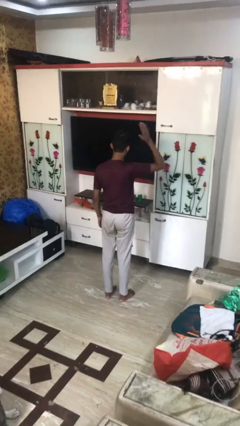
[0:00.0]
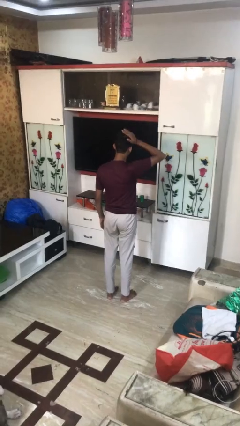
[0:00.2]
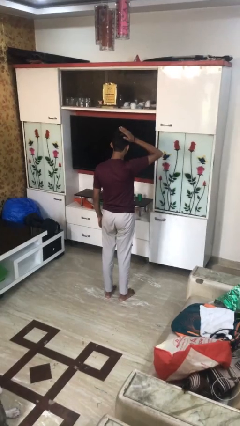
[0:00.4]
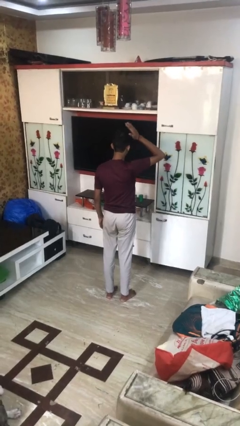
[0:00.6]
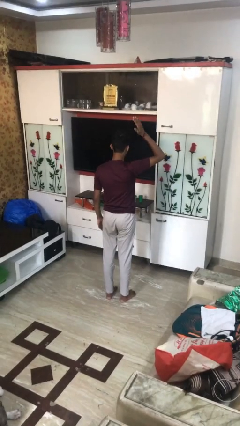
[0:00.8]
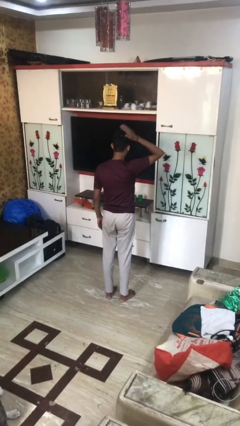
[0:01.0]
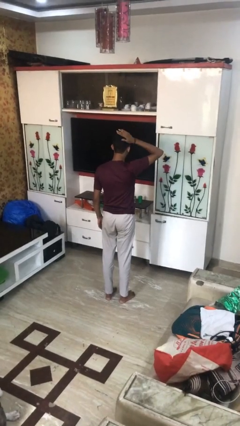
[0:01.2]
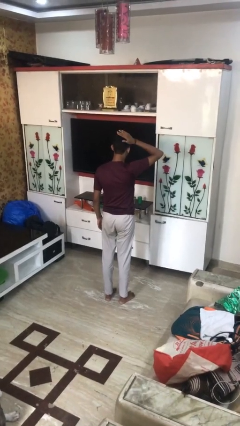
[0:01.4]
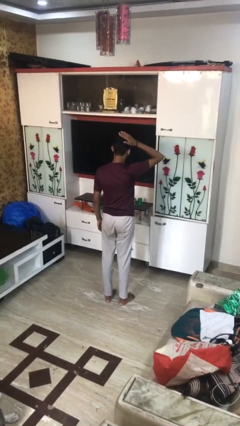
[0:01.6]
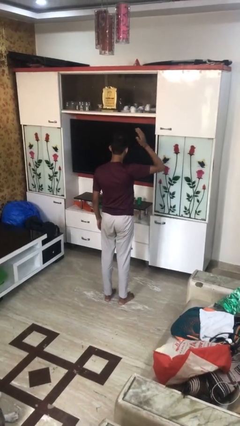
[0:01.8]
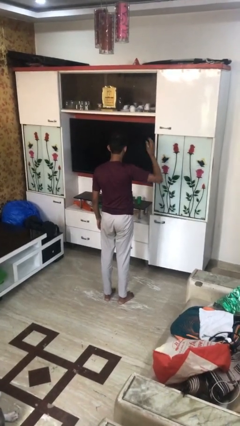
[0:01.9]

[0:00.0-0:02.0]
person pats head

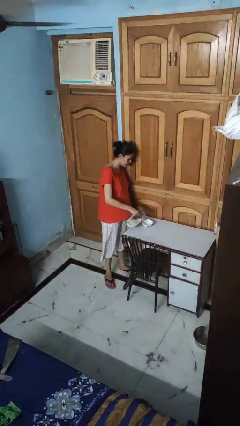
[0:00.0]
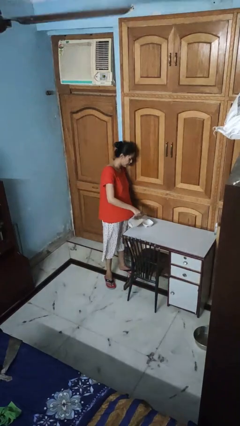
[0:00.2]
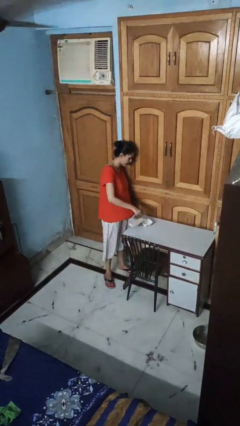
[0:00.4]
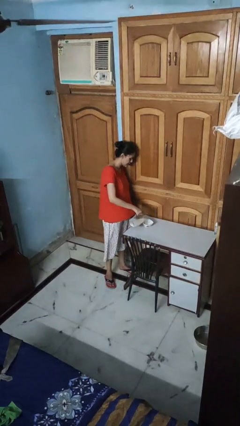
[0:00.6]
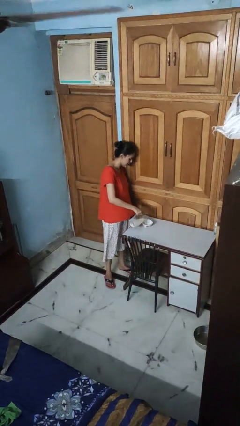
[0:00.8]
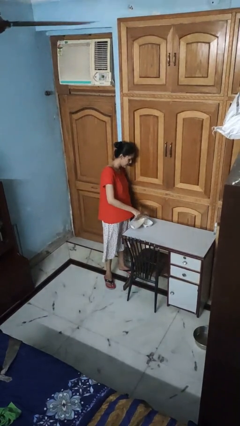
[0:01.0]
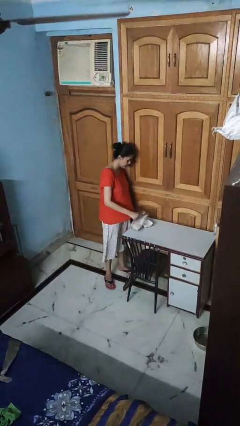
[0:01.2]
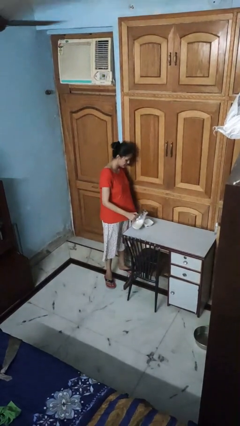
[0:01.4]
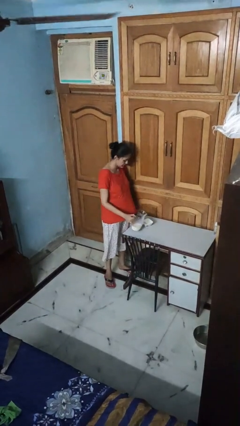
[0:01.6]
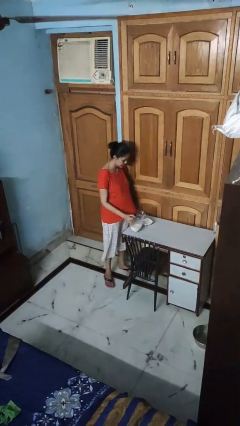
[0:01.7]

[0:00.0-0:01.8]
person pours into bowl

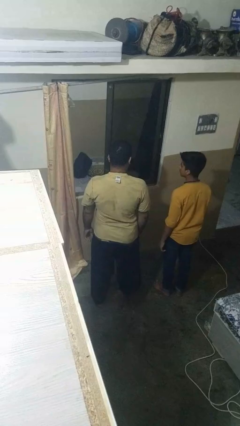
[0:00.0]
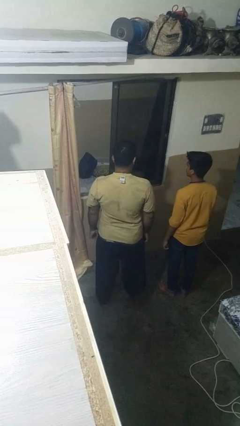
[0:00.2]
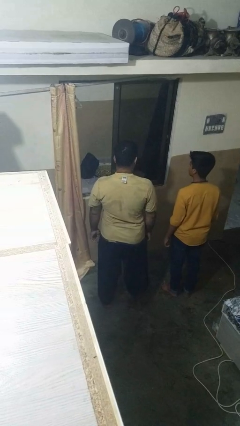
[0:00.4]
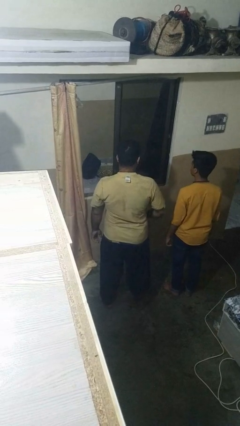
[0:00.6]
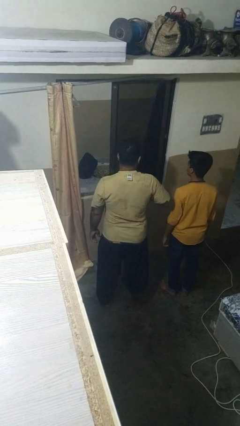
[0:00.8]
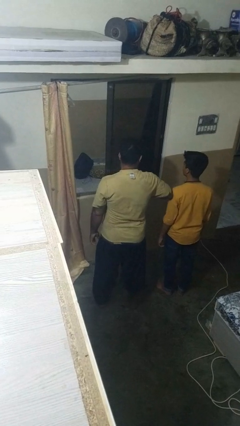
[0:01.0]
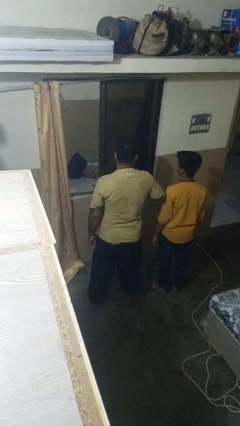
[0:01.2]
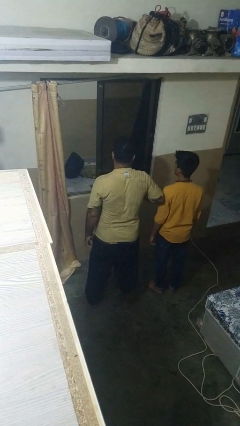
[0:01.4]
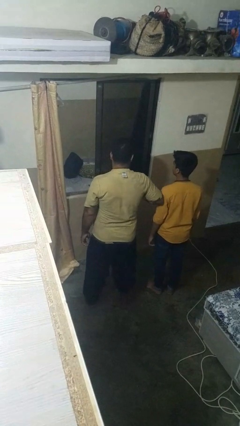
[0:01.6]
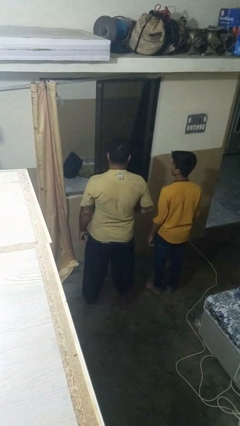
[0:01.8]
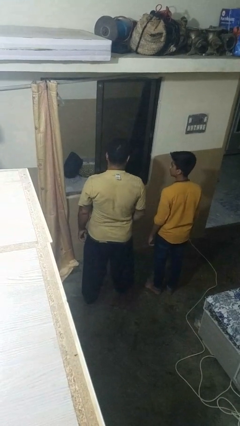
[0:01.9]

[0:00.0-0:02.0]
person nudges person with elbow

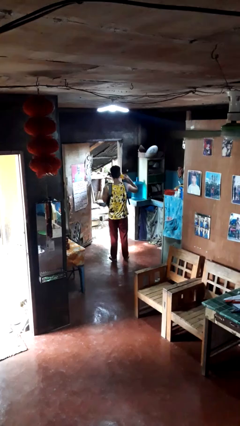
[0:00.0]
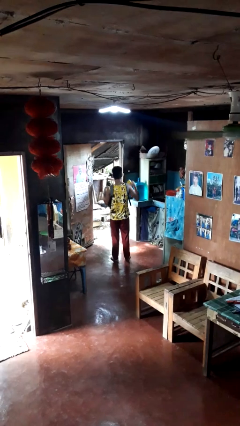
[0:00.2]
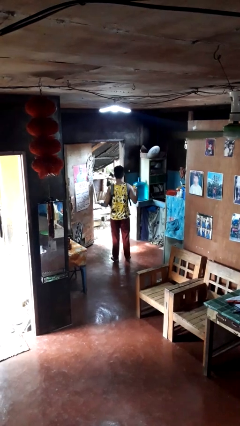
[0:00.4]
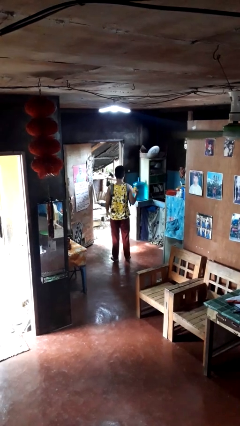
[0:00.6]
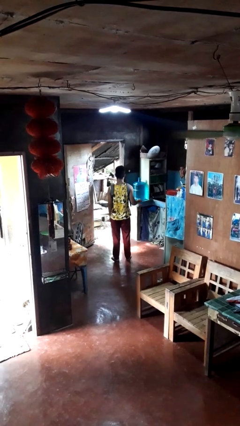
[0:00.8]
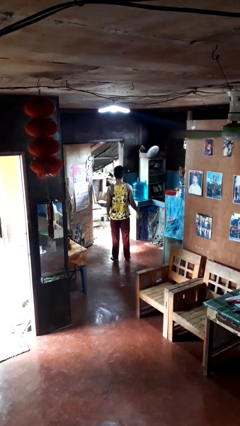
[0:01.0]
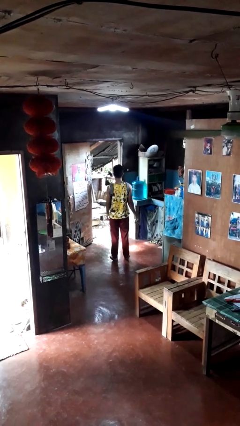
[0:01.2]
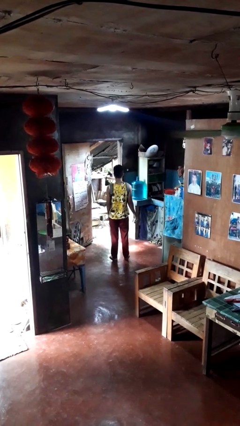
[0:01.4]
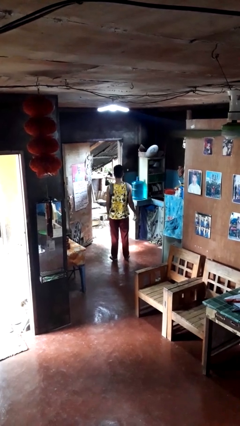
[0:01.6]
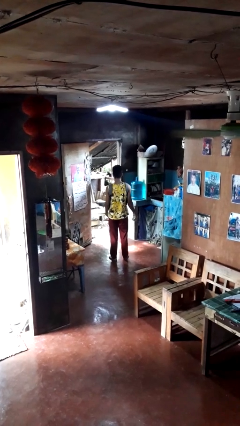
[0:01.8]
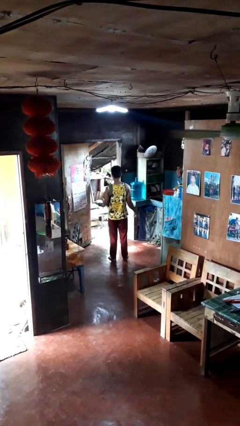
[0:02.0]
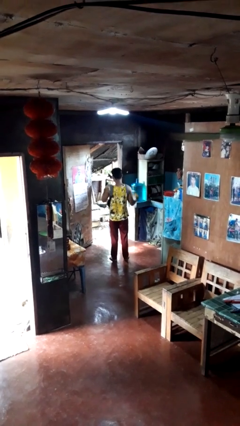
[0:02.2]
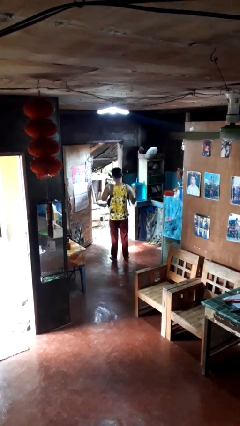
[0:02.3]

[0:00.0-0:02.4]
person takes object from backpack

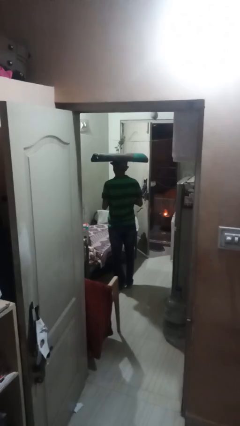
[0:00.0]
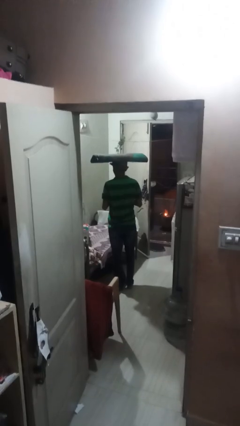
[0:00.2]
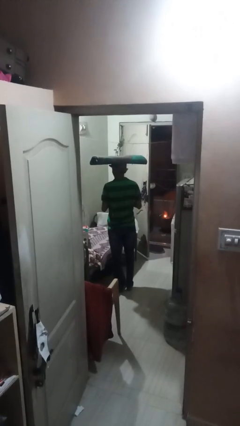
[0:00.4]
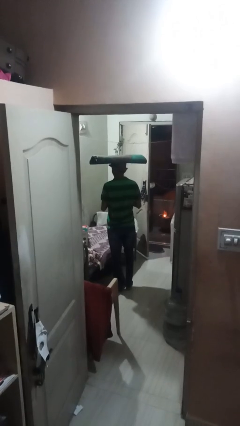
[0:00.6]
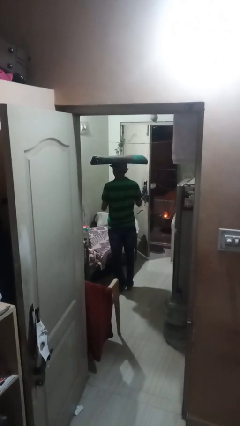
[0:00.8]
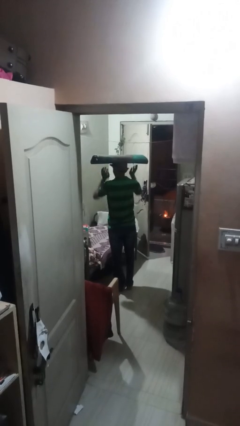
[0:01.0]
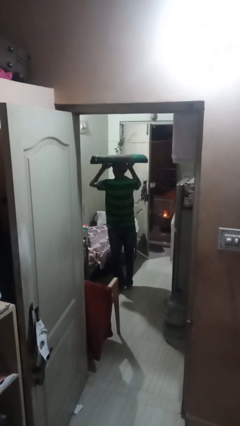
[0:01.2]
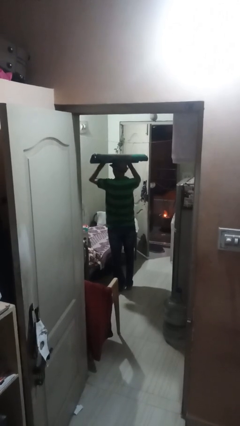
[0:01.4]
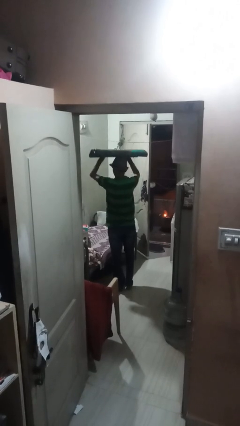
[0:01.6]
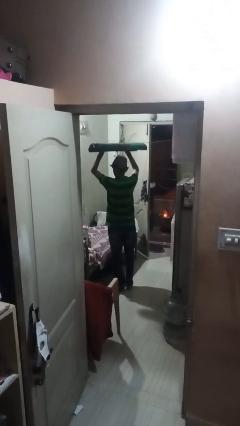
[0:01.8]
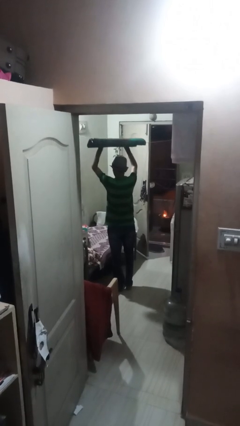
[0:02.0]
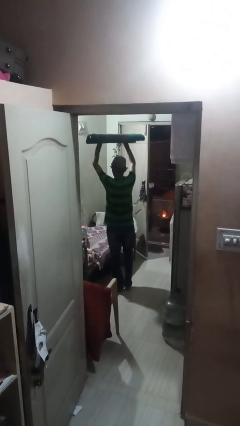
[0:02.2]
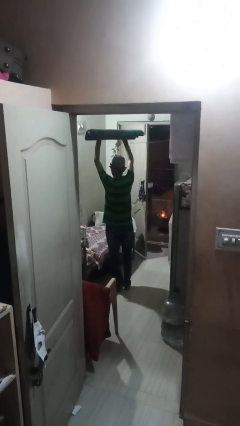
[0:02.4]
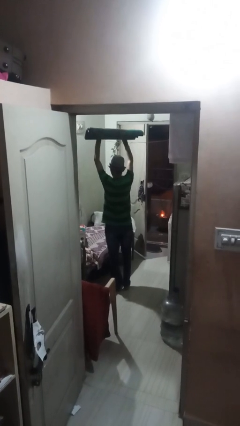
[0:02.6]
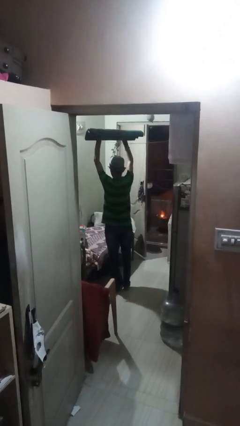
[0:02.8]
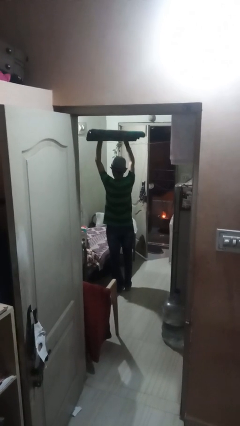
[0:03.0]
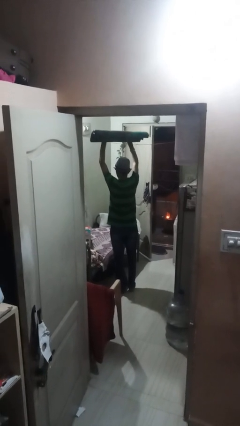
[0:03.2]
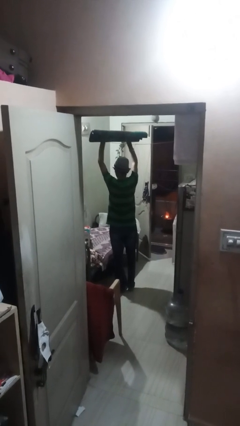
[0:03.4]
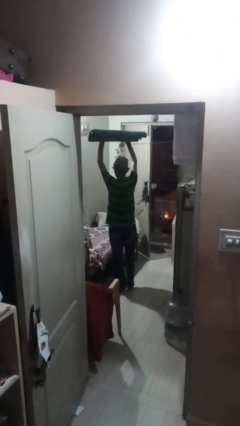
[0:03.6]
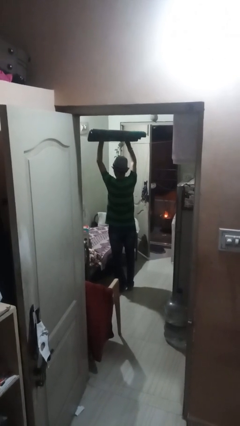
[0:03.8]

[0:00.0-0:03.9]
person holds object above head

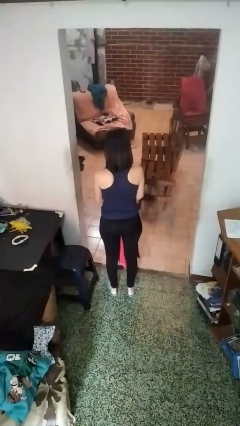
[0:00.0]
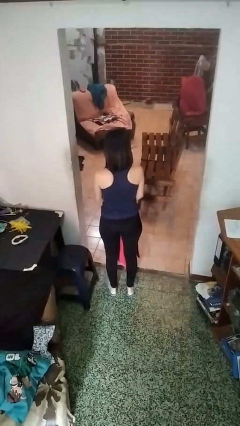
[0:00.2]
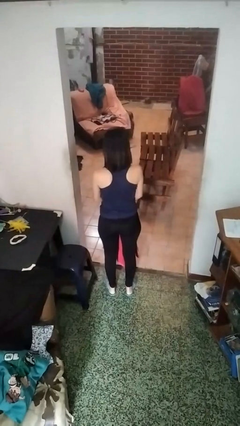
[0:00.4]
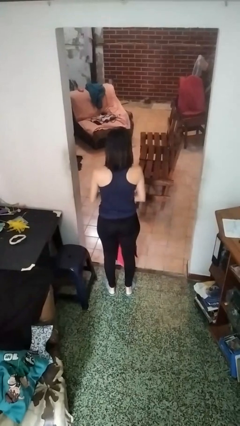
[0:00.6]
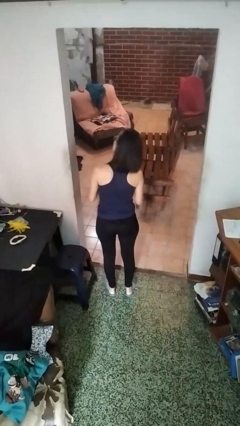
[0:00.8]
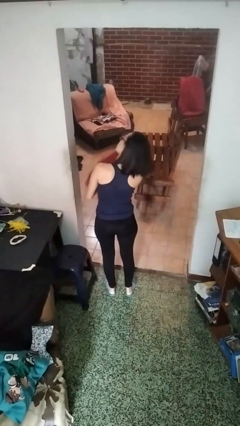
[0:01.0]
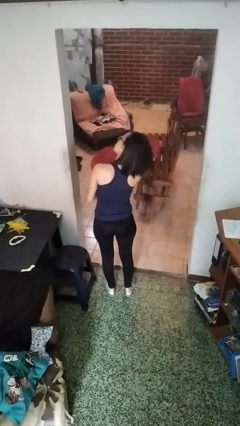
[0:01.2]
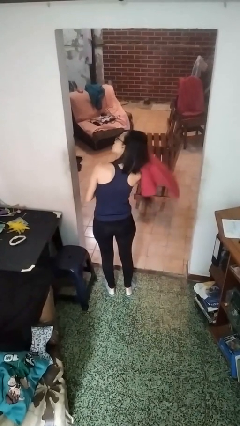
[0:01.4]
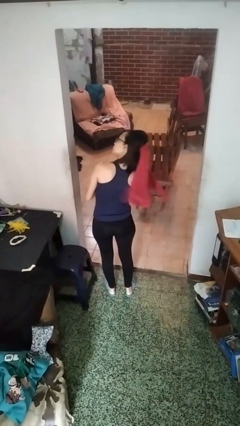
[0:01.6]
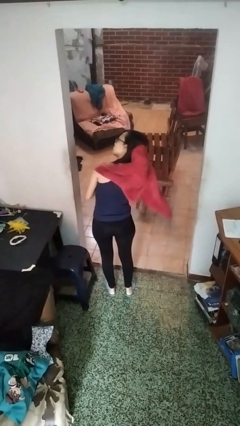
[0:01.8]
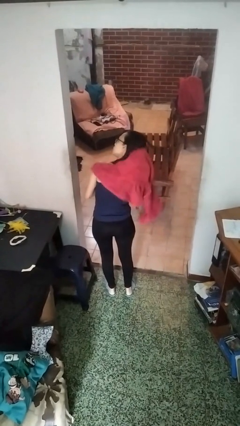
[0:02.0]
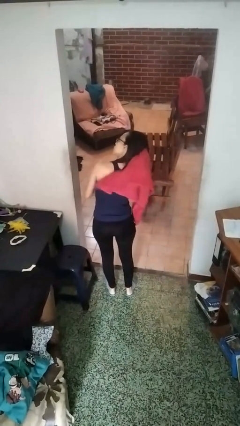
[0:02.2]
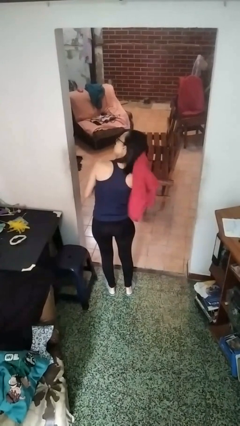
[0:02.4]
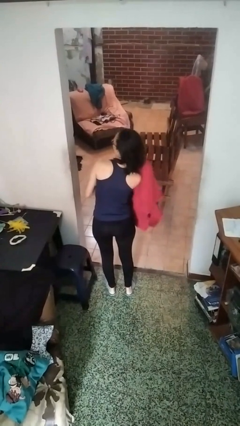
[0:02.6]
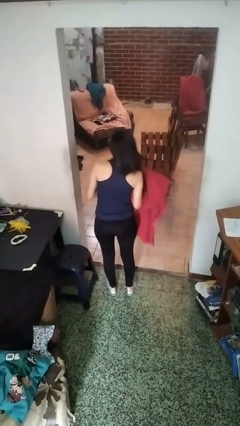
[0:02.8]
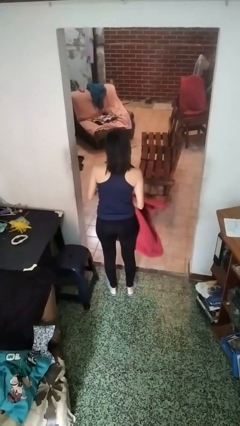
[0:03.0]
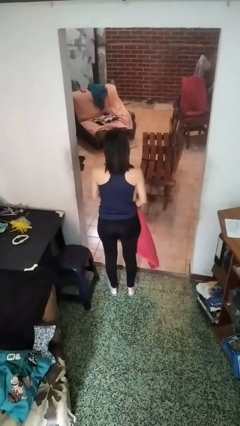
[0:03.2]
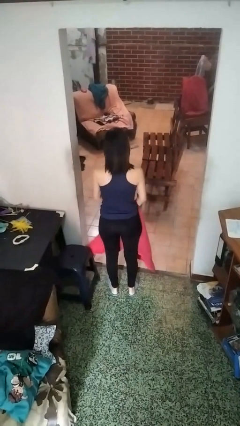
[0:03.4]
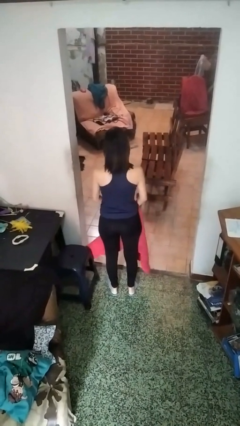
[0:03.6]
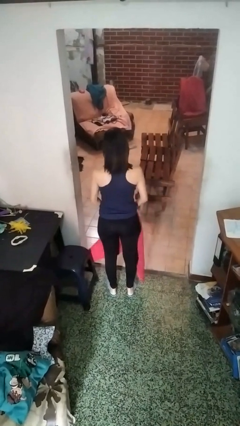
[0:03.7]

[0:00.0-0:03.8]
person dries hair with towel

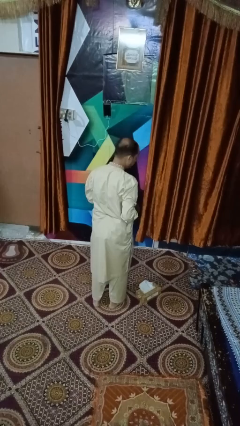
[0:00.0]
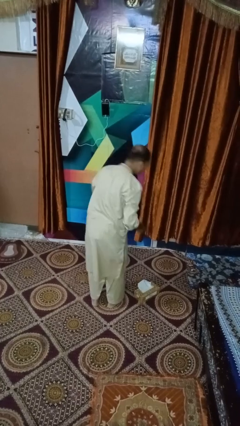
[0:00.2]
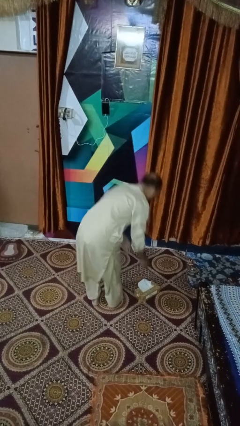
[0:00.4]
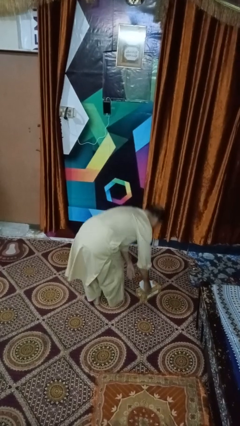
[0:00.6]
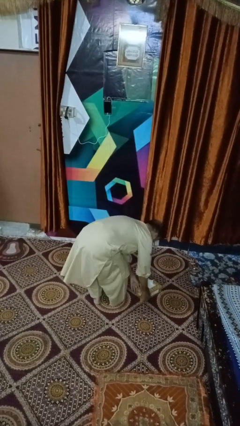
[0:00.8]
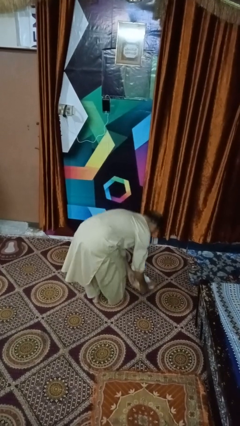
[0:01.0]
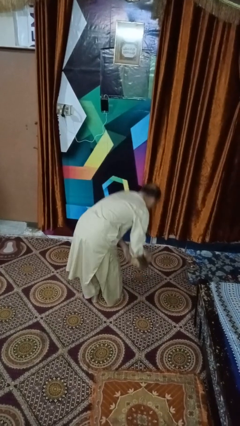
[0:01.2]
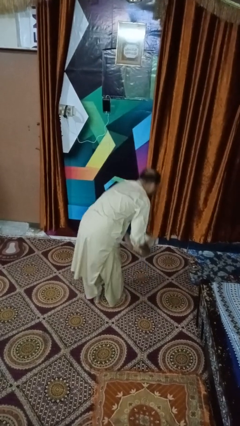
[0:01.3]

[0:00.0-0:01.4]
person picks up object from floor
